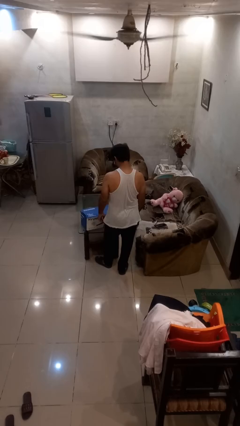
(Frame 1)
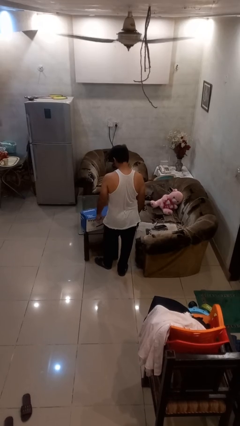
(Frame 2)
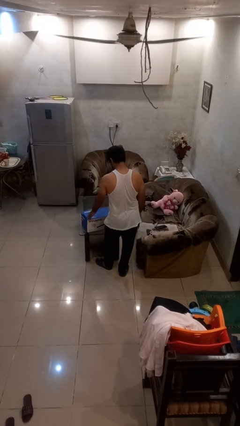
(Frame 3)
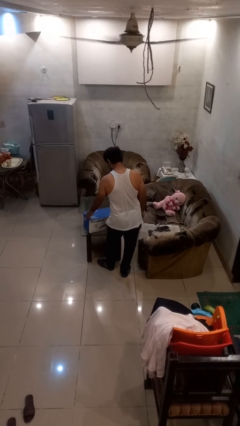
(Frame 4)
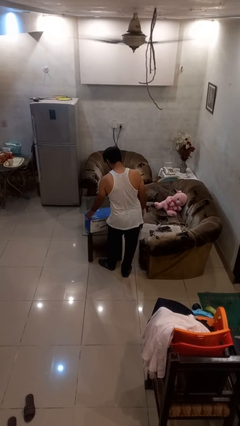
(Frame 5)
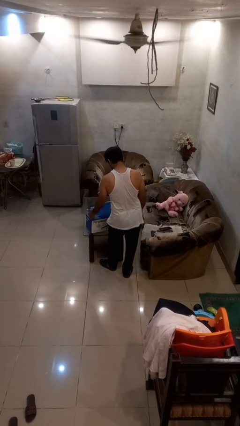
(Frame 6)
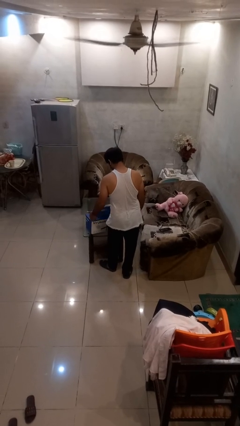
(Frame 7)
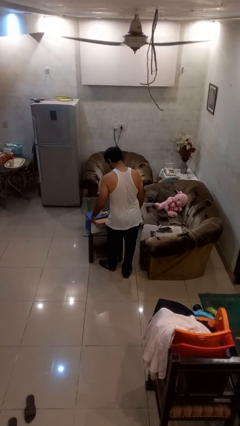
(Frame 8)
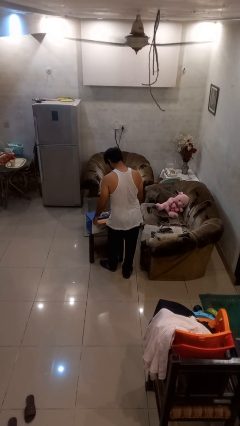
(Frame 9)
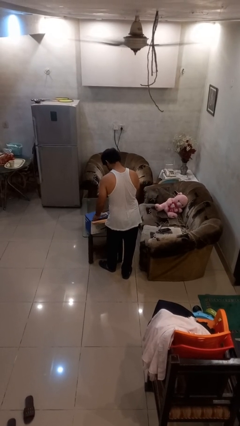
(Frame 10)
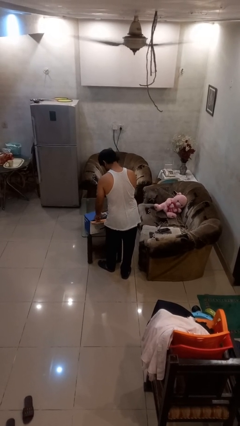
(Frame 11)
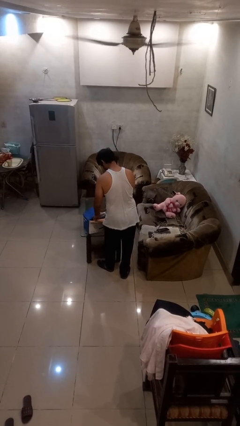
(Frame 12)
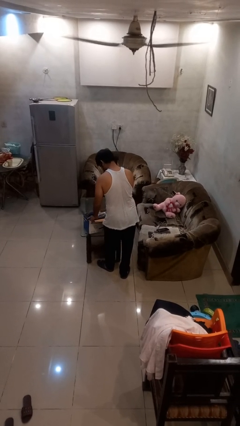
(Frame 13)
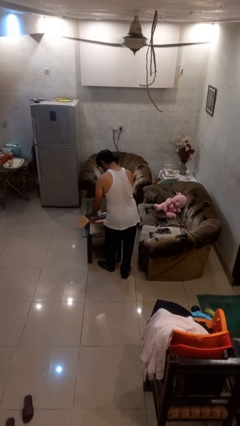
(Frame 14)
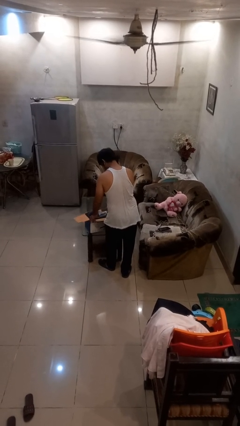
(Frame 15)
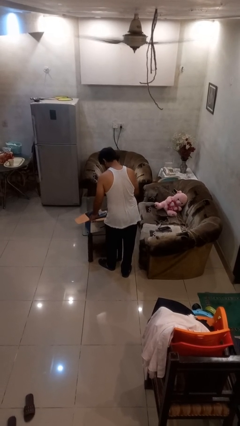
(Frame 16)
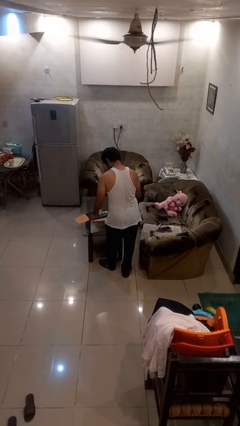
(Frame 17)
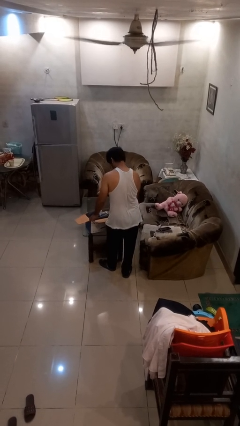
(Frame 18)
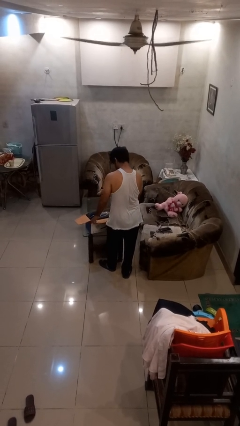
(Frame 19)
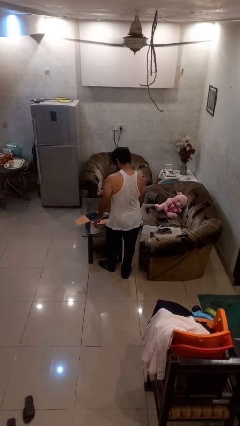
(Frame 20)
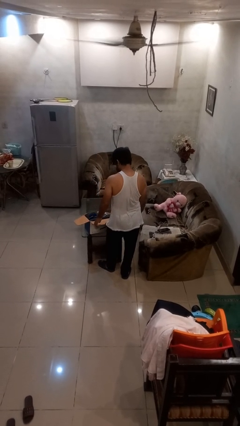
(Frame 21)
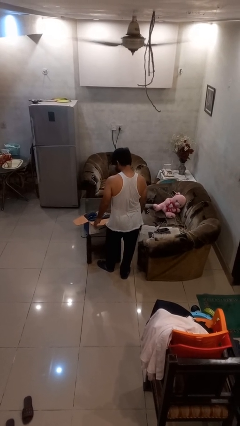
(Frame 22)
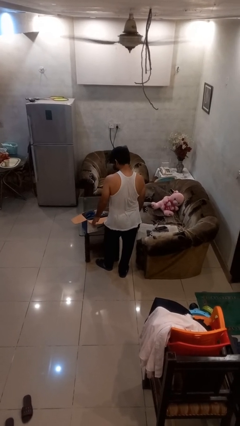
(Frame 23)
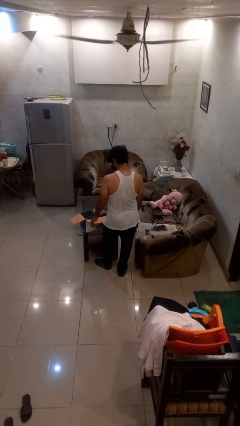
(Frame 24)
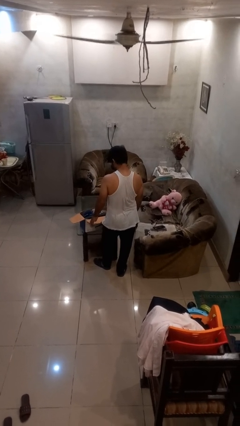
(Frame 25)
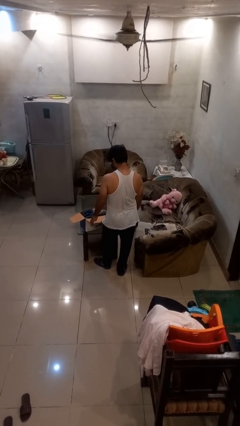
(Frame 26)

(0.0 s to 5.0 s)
person opens box

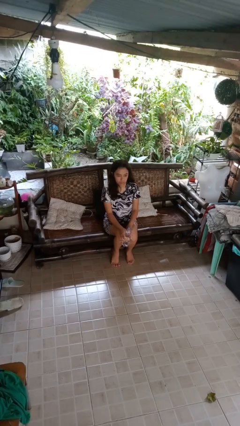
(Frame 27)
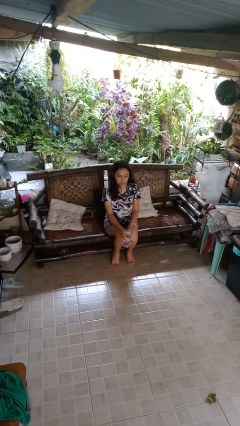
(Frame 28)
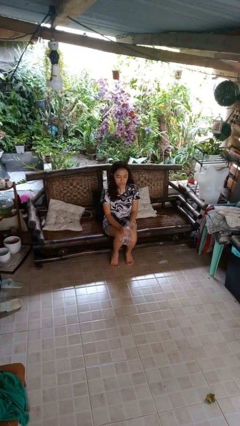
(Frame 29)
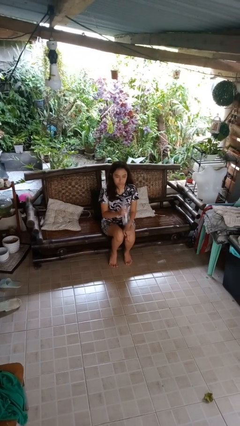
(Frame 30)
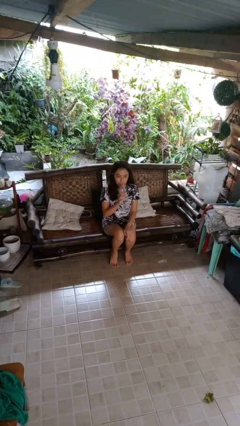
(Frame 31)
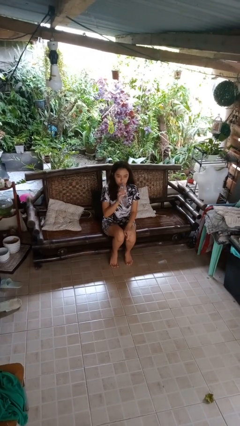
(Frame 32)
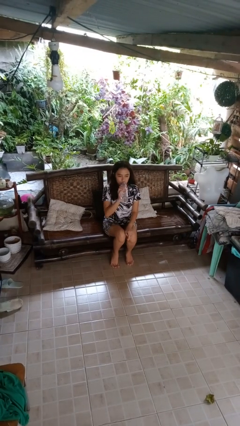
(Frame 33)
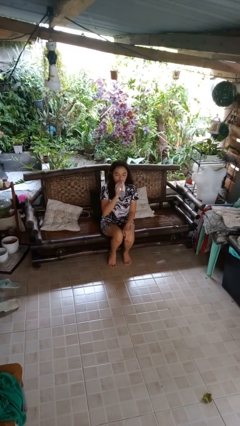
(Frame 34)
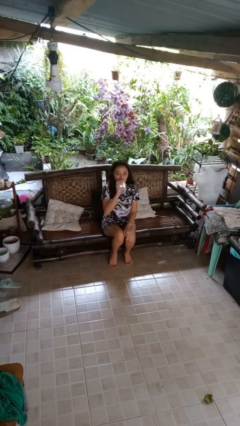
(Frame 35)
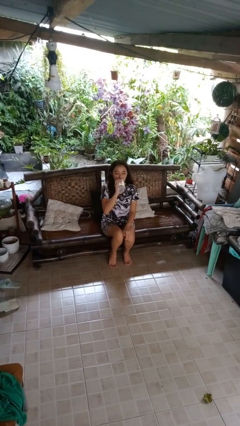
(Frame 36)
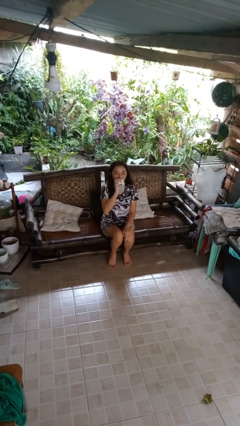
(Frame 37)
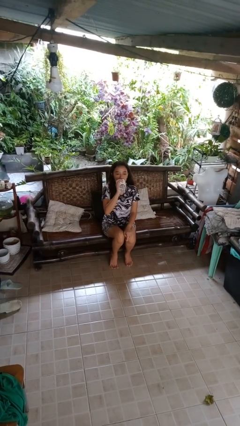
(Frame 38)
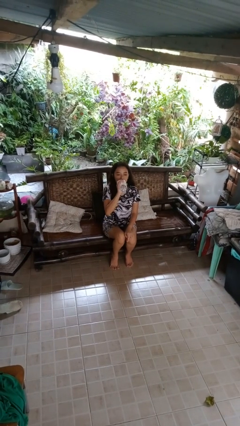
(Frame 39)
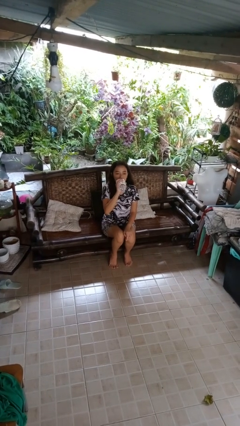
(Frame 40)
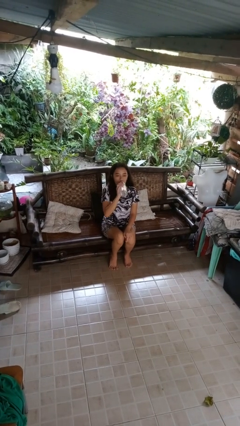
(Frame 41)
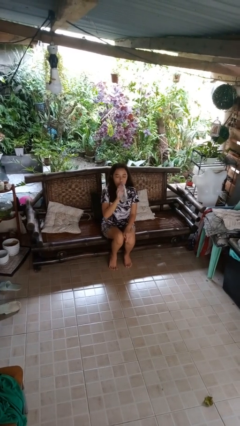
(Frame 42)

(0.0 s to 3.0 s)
person drinks from bottle

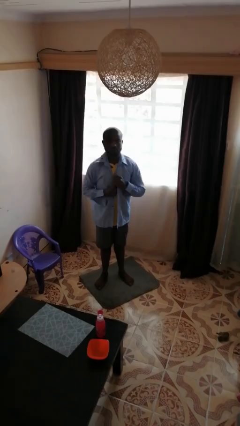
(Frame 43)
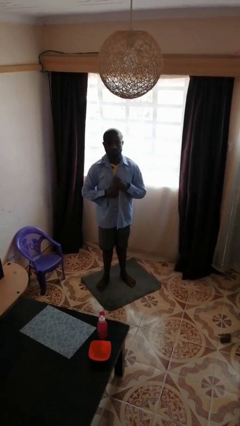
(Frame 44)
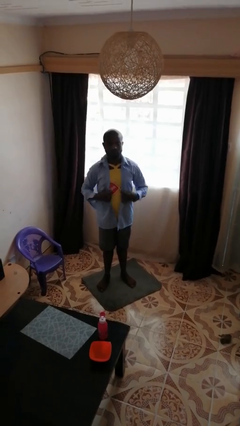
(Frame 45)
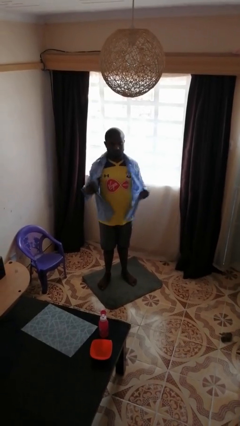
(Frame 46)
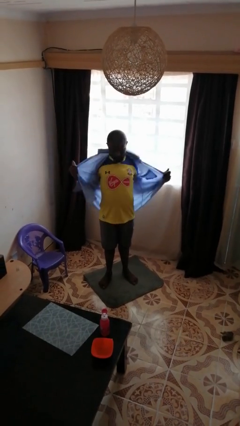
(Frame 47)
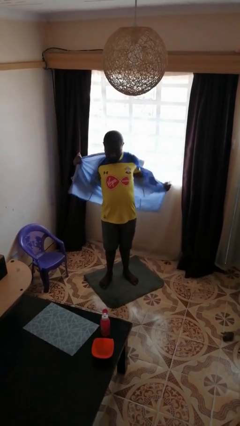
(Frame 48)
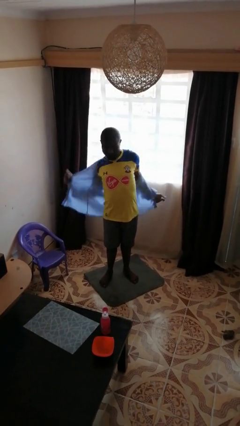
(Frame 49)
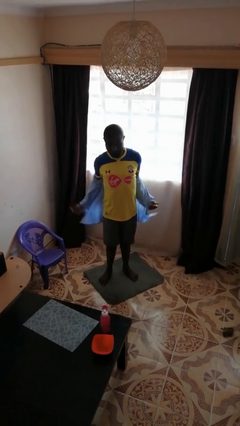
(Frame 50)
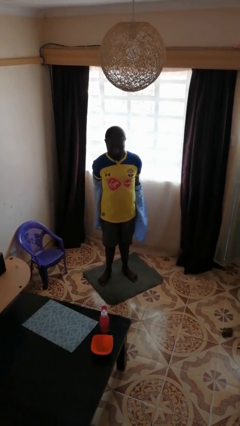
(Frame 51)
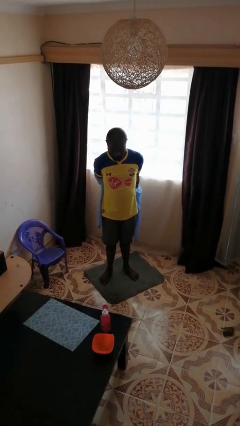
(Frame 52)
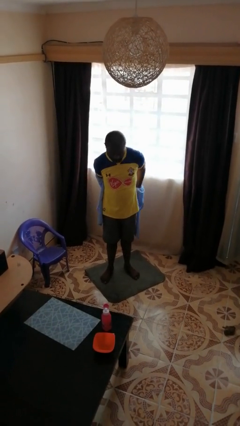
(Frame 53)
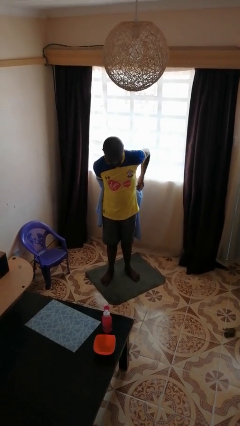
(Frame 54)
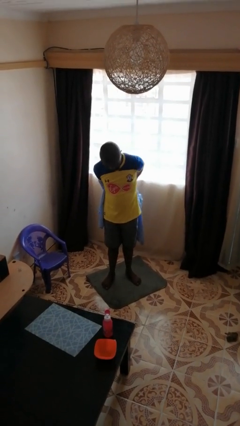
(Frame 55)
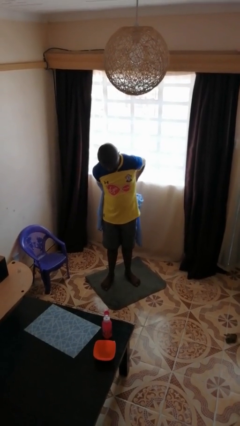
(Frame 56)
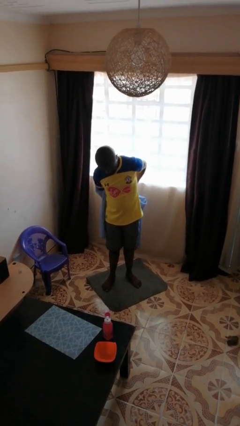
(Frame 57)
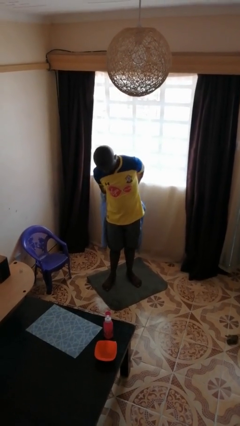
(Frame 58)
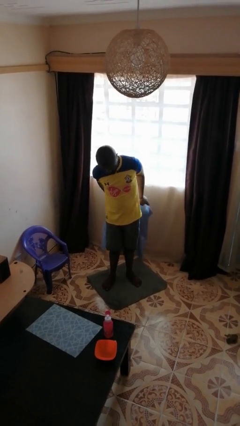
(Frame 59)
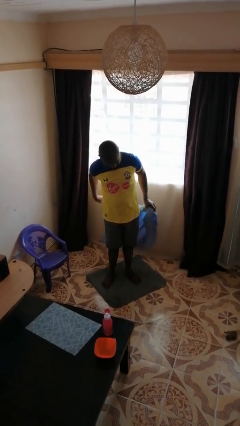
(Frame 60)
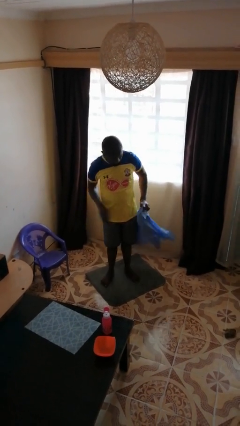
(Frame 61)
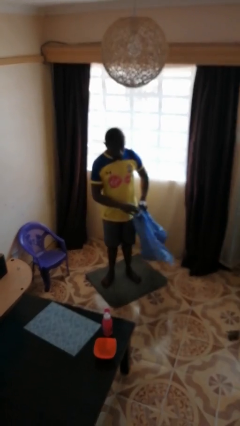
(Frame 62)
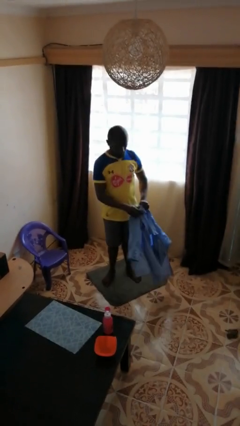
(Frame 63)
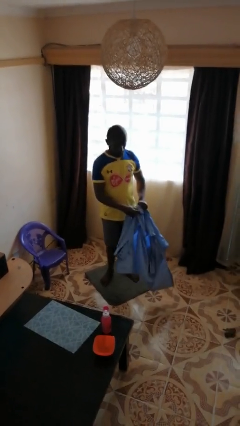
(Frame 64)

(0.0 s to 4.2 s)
person takes off shirt

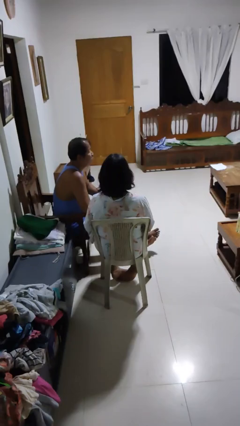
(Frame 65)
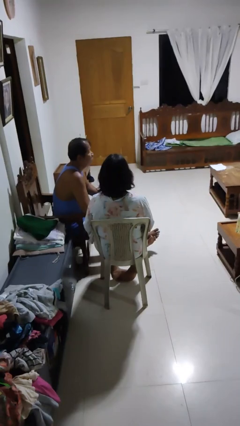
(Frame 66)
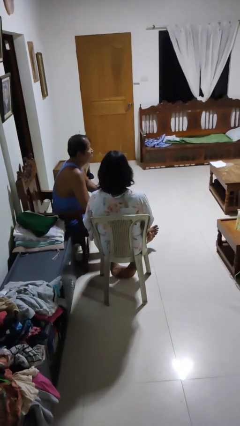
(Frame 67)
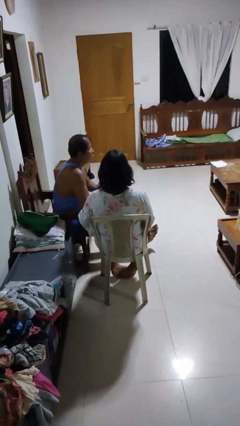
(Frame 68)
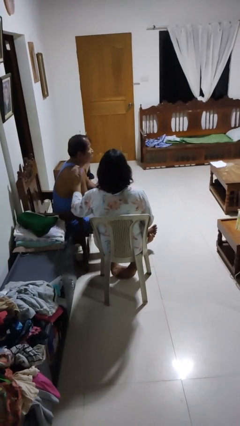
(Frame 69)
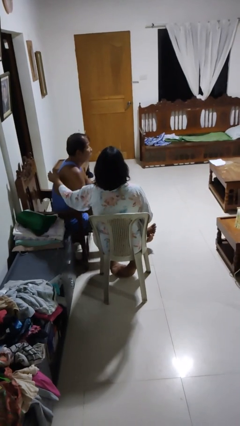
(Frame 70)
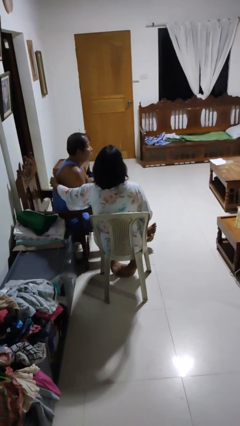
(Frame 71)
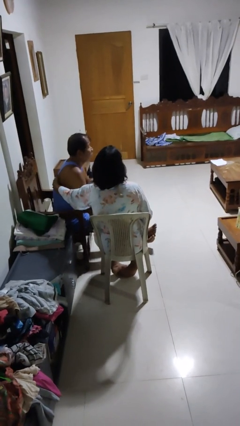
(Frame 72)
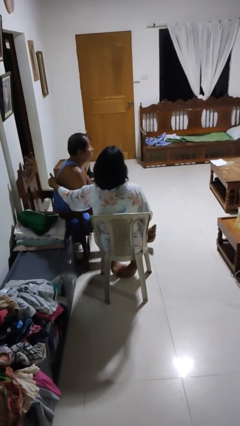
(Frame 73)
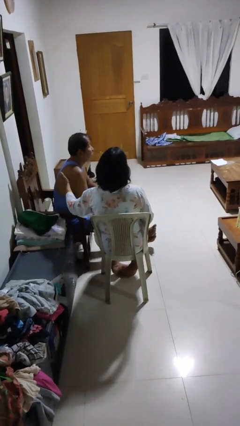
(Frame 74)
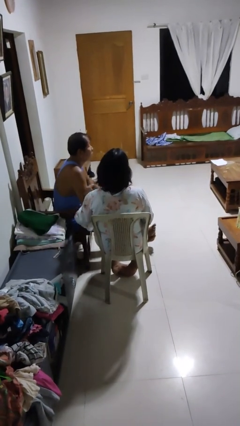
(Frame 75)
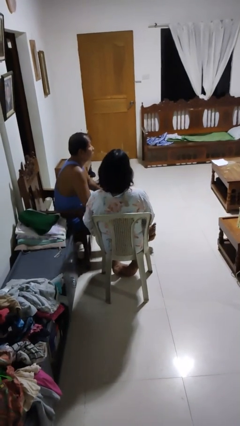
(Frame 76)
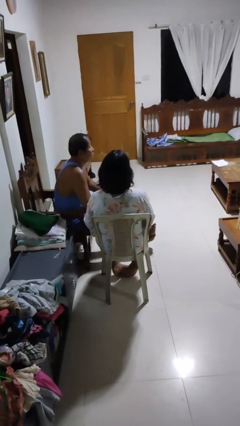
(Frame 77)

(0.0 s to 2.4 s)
person touches back of person

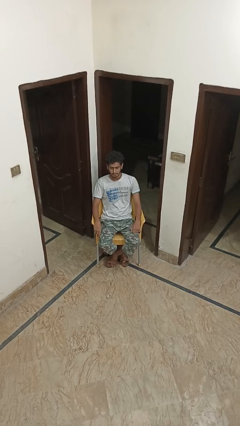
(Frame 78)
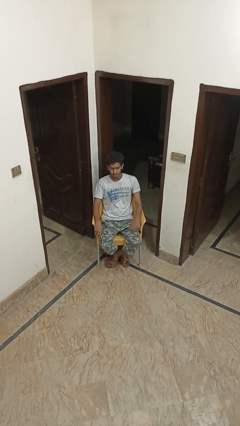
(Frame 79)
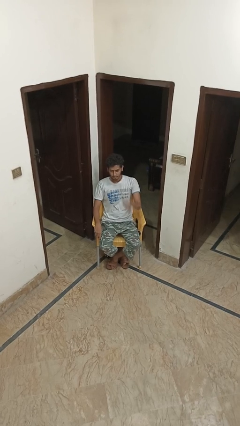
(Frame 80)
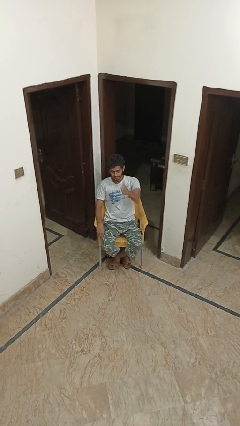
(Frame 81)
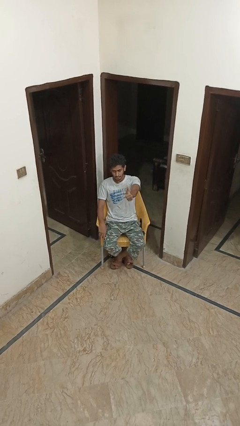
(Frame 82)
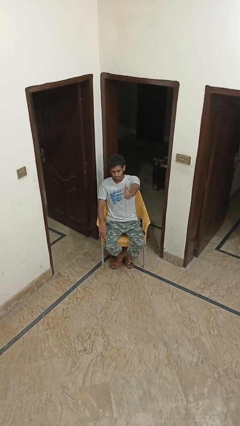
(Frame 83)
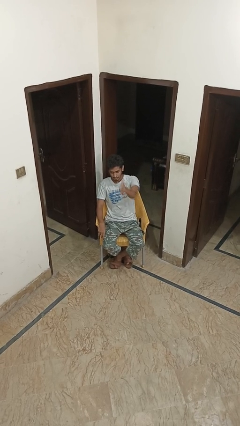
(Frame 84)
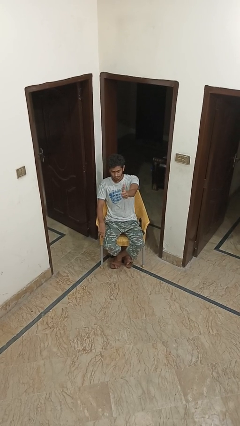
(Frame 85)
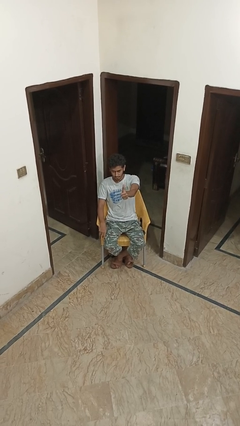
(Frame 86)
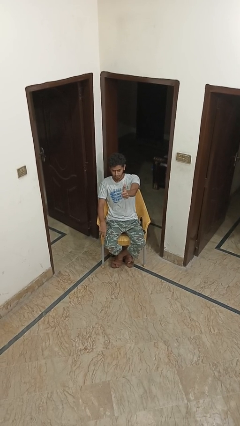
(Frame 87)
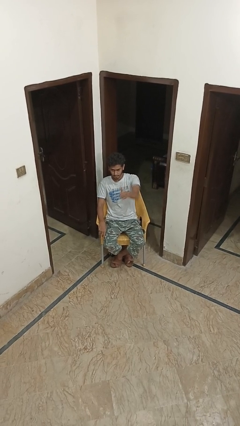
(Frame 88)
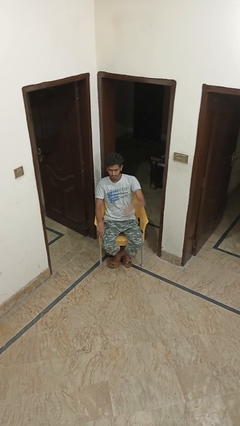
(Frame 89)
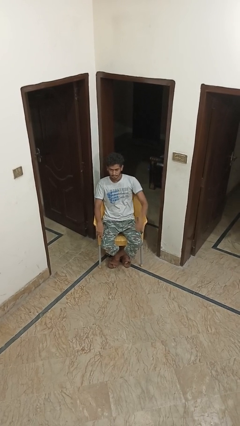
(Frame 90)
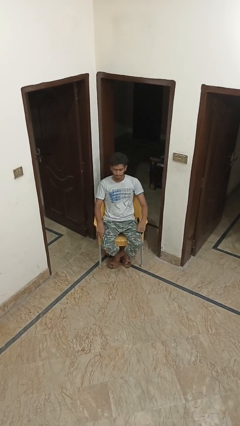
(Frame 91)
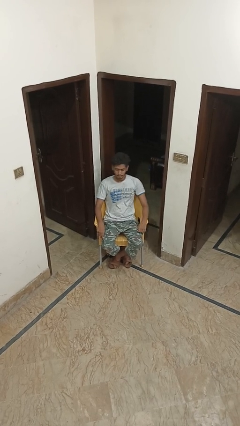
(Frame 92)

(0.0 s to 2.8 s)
person gestures thumbs up

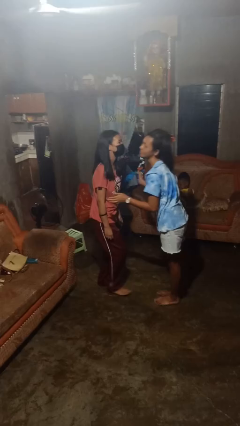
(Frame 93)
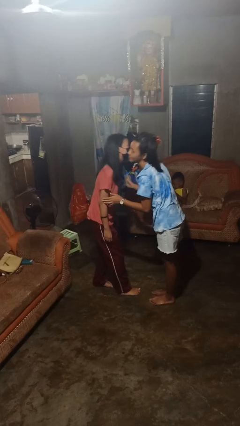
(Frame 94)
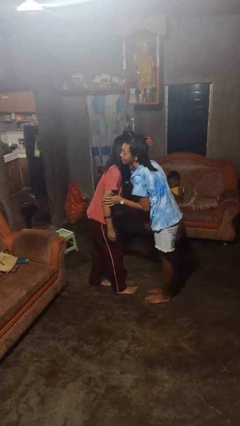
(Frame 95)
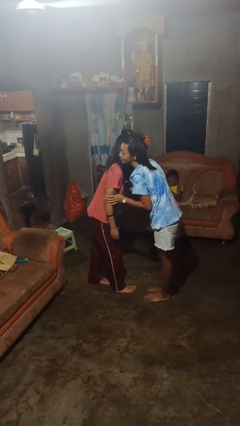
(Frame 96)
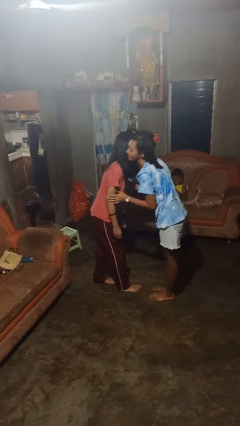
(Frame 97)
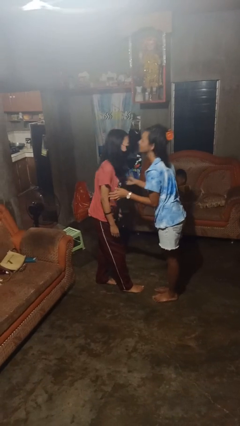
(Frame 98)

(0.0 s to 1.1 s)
person kisses cheek of person
